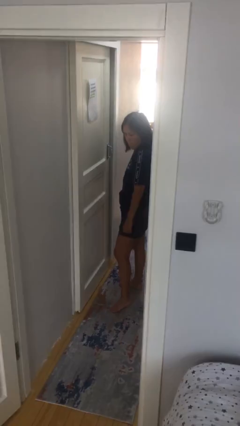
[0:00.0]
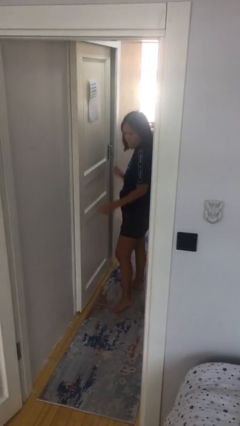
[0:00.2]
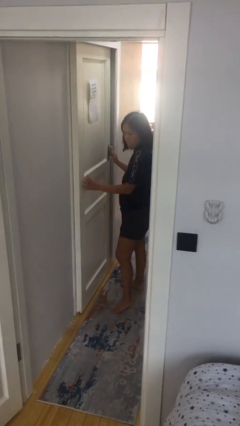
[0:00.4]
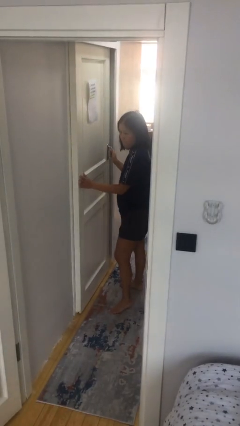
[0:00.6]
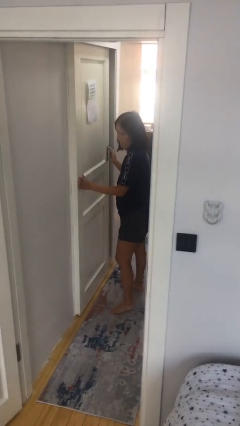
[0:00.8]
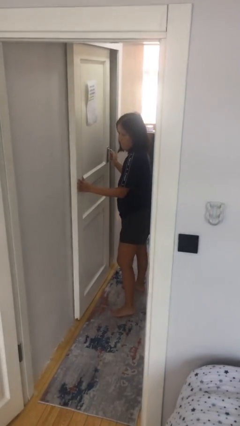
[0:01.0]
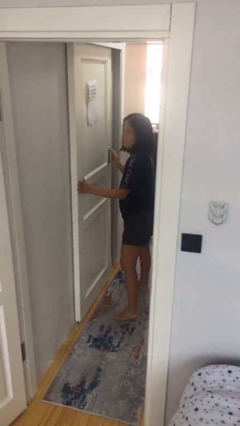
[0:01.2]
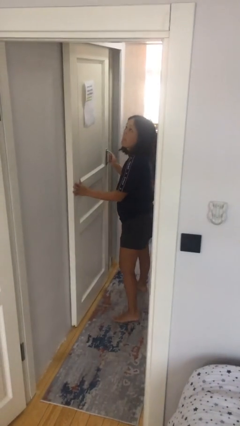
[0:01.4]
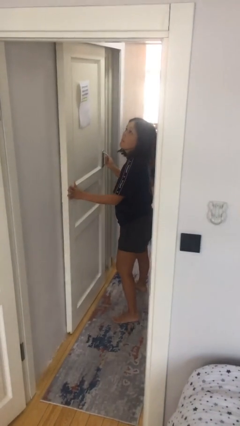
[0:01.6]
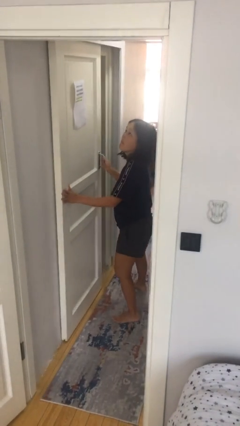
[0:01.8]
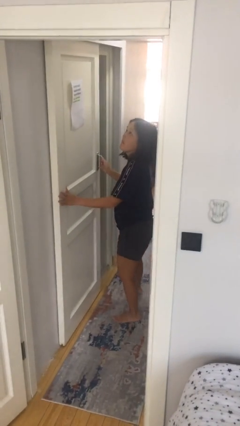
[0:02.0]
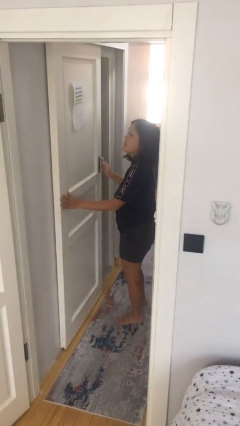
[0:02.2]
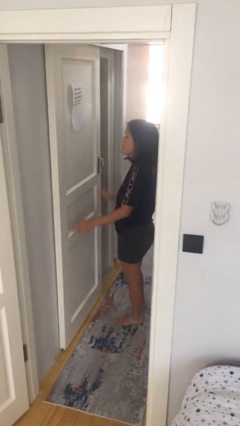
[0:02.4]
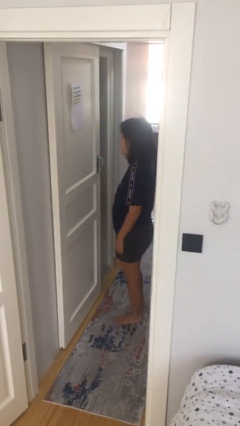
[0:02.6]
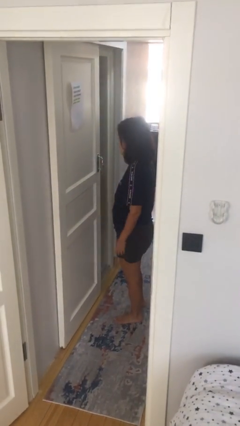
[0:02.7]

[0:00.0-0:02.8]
person opens sliding door

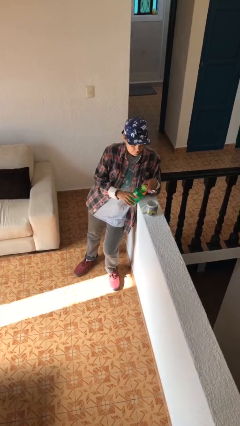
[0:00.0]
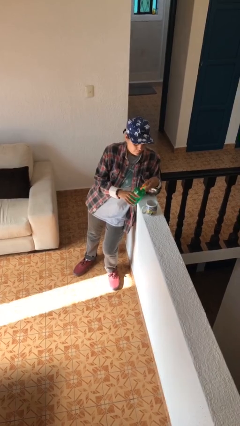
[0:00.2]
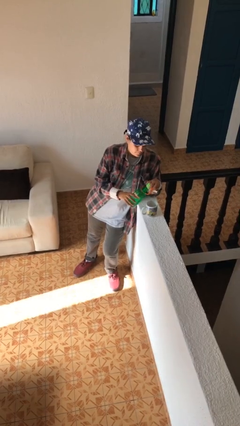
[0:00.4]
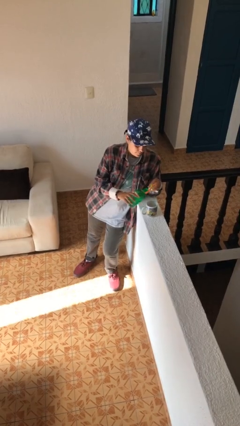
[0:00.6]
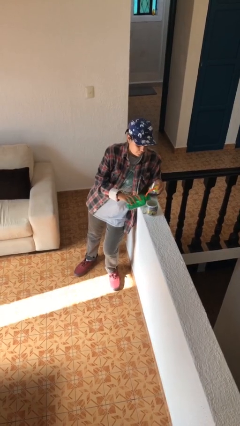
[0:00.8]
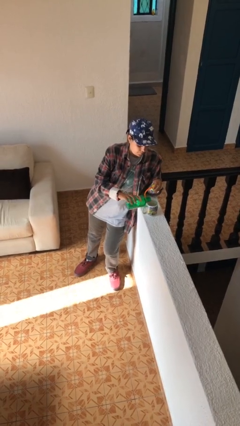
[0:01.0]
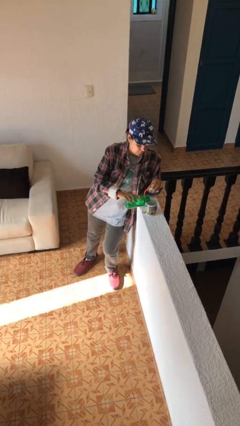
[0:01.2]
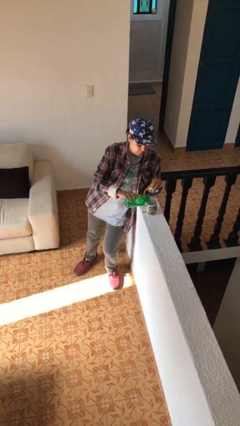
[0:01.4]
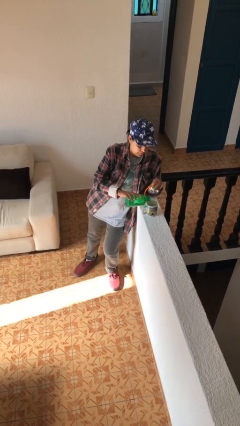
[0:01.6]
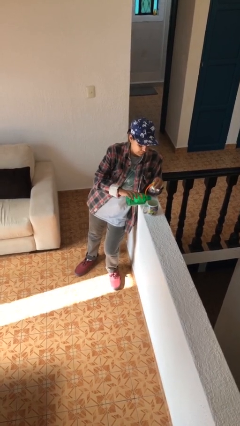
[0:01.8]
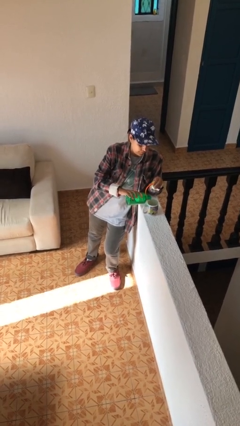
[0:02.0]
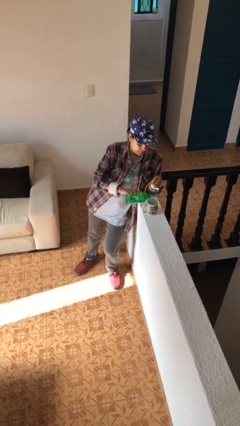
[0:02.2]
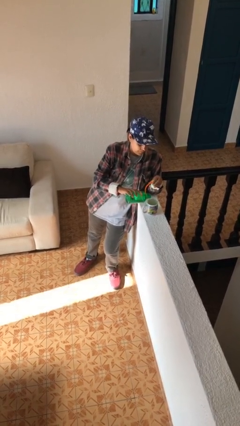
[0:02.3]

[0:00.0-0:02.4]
person pours liquid into cup

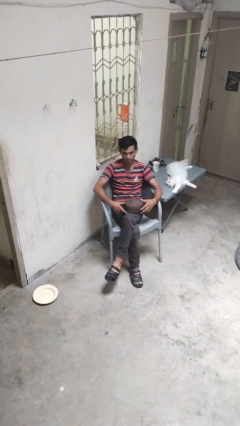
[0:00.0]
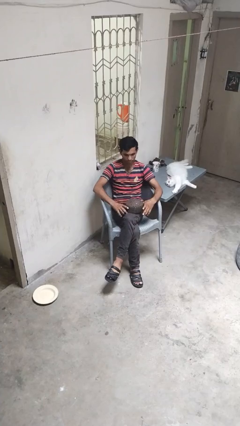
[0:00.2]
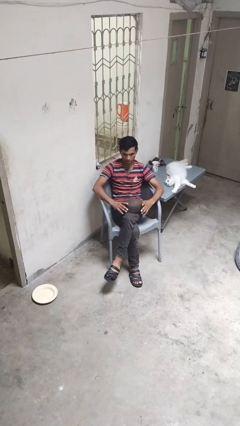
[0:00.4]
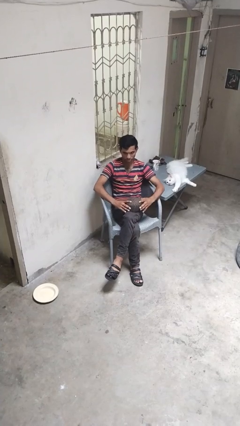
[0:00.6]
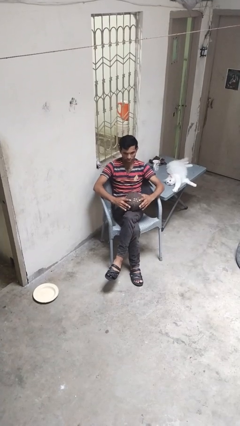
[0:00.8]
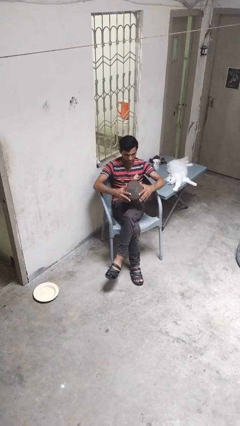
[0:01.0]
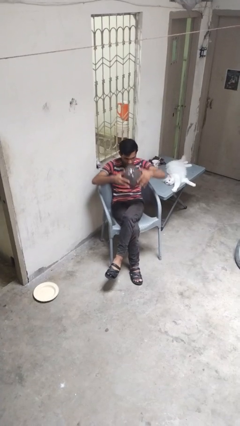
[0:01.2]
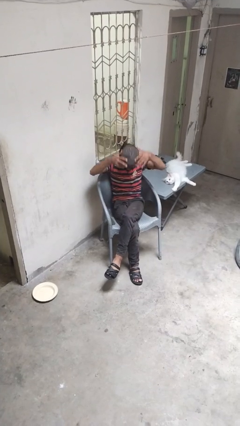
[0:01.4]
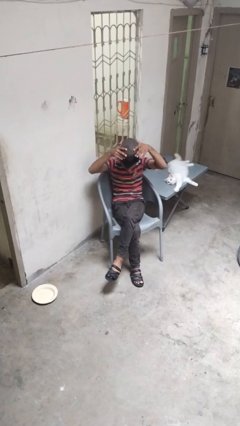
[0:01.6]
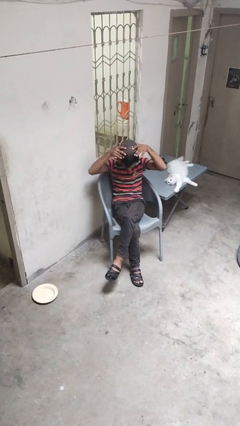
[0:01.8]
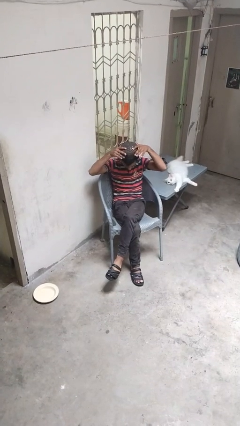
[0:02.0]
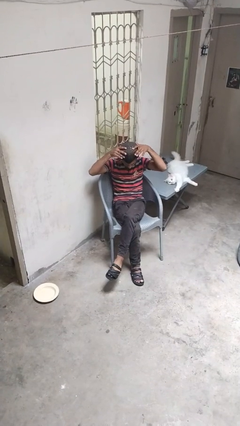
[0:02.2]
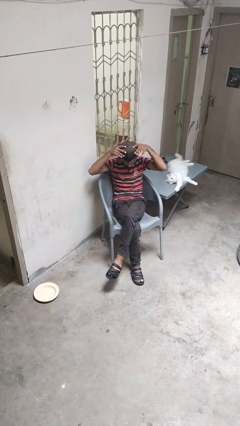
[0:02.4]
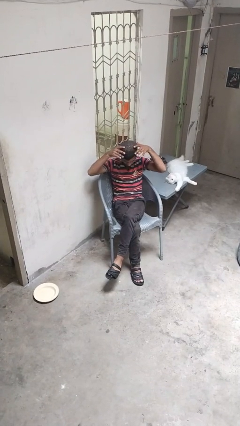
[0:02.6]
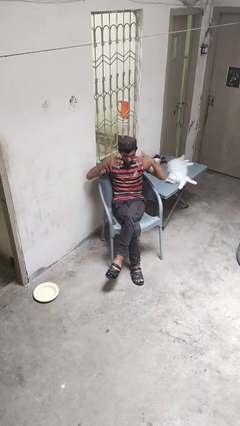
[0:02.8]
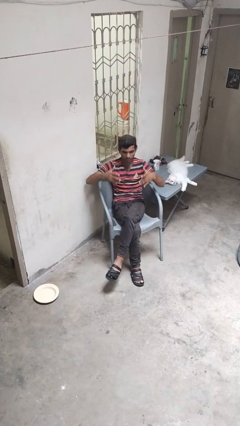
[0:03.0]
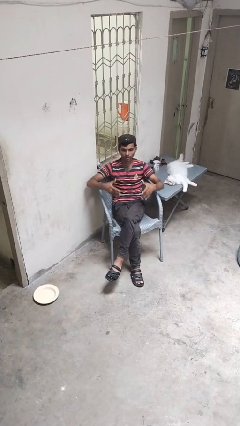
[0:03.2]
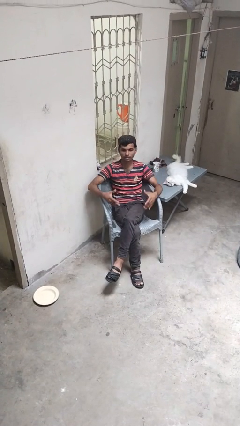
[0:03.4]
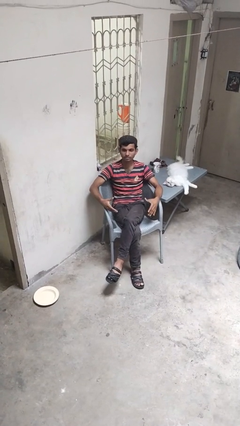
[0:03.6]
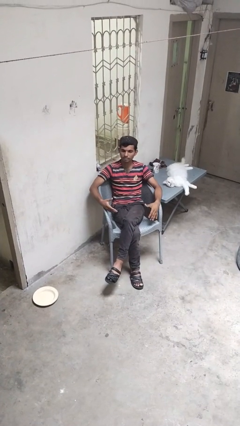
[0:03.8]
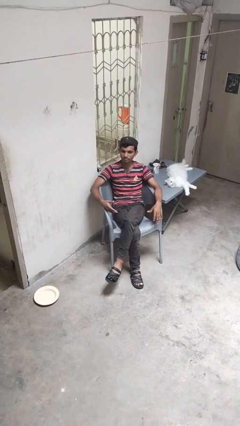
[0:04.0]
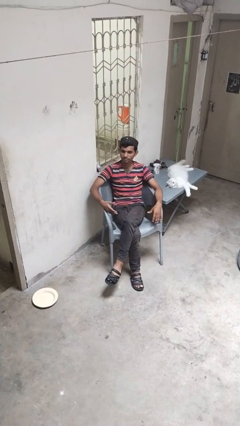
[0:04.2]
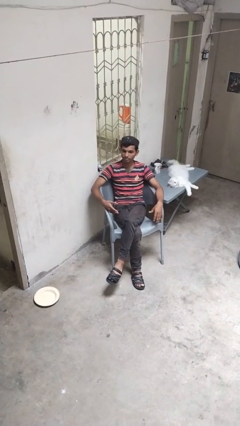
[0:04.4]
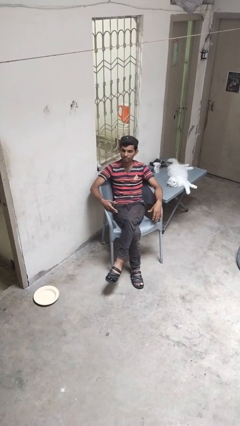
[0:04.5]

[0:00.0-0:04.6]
person puts on hat

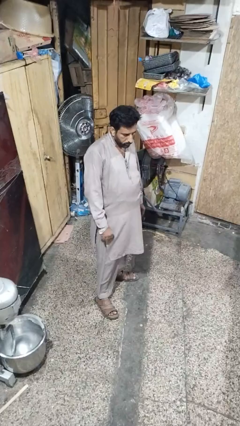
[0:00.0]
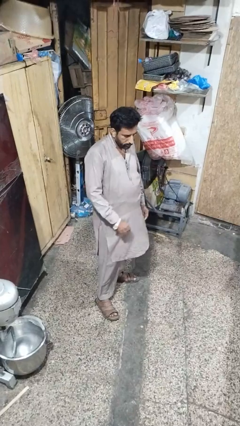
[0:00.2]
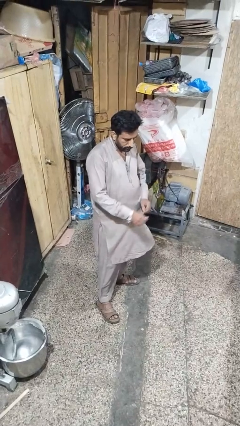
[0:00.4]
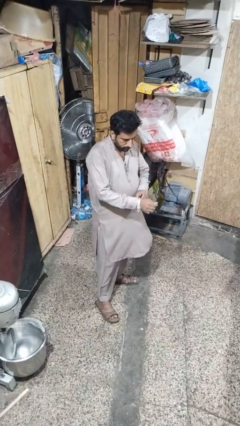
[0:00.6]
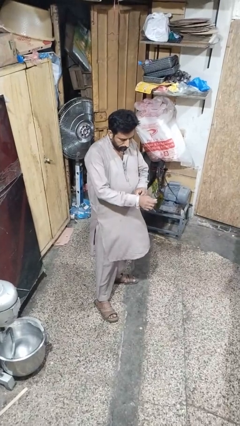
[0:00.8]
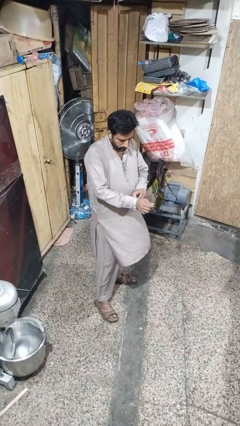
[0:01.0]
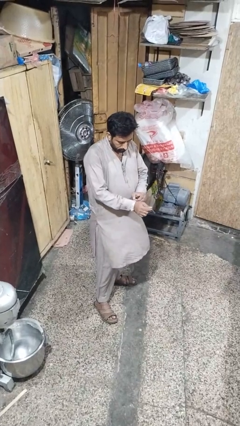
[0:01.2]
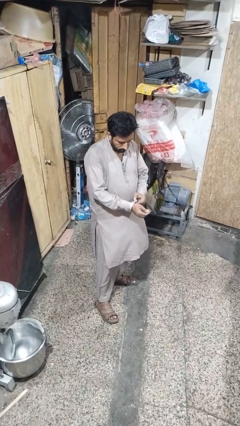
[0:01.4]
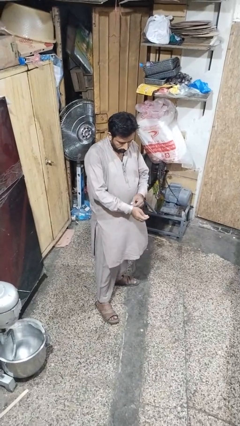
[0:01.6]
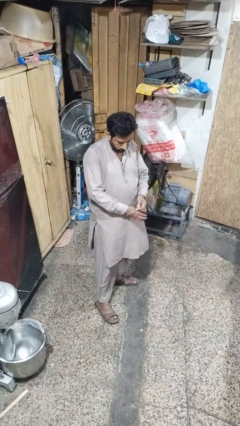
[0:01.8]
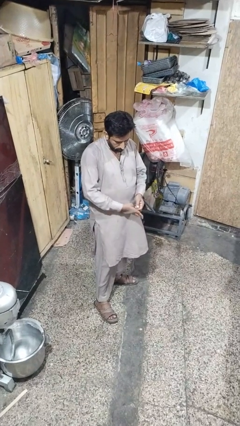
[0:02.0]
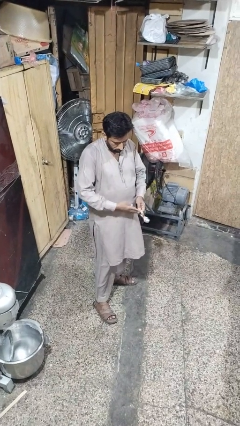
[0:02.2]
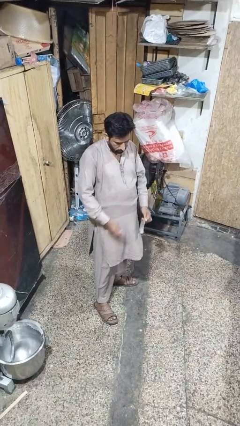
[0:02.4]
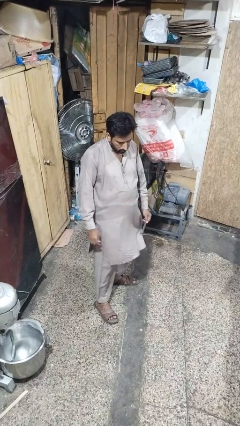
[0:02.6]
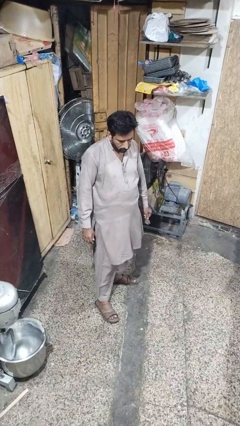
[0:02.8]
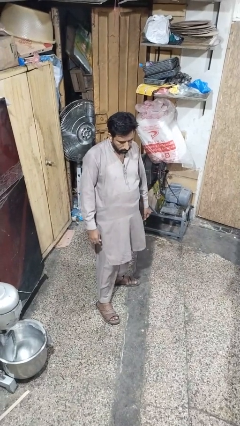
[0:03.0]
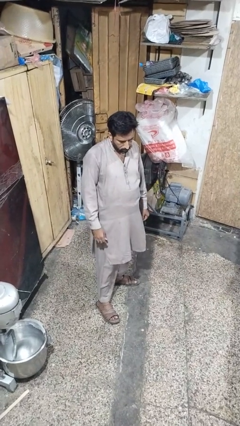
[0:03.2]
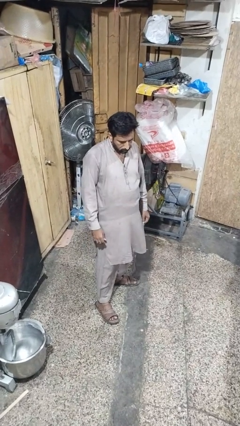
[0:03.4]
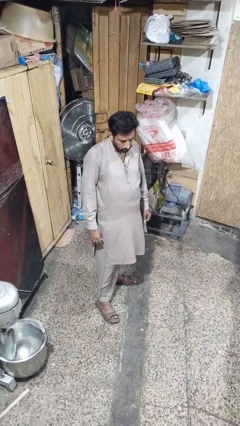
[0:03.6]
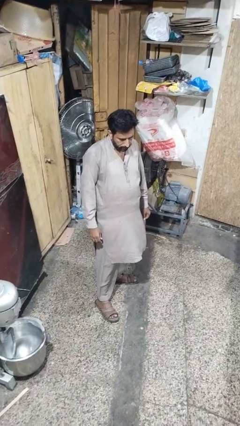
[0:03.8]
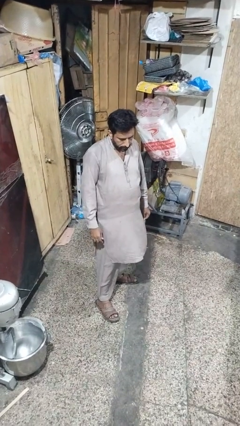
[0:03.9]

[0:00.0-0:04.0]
person takes off wristwatch

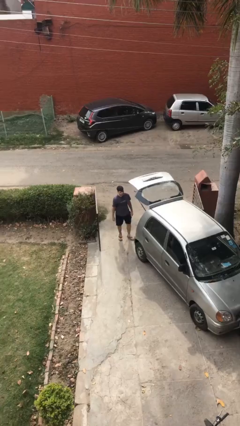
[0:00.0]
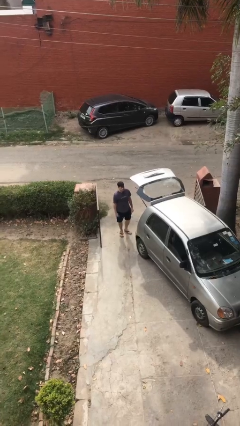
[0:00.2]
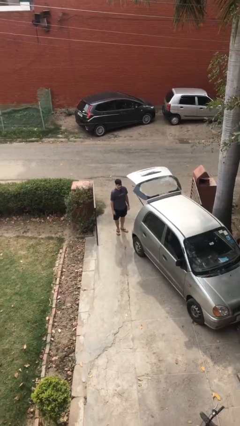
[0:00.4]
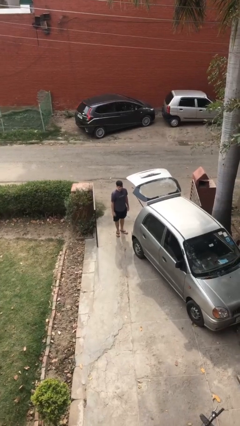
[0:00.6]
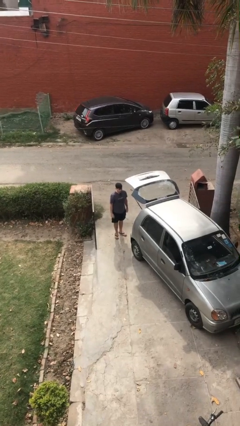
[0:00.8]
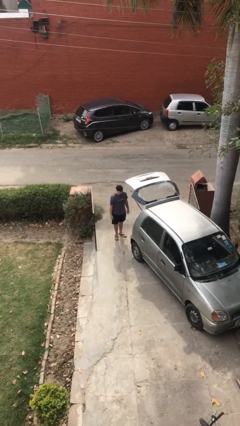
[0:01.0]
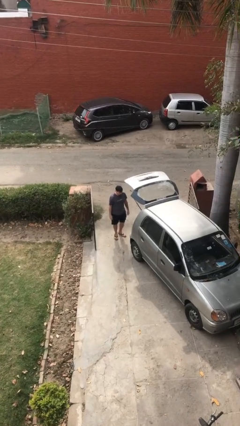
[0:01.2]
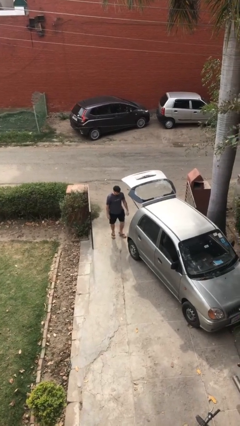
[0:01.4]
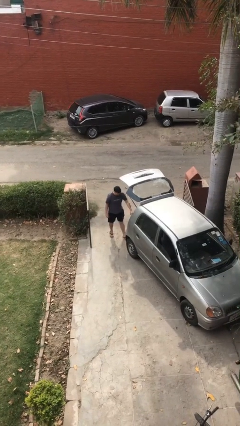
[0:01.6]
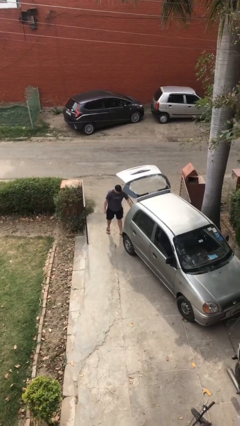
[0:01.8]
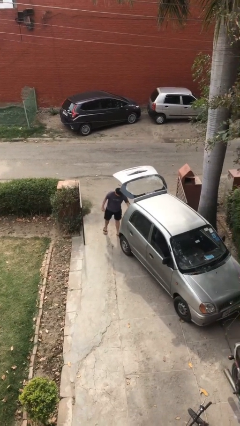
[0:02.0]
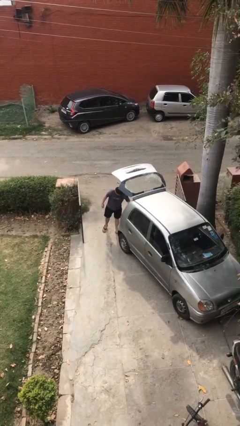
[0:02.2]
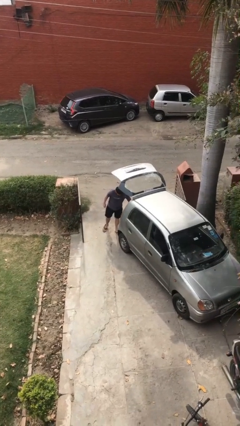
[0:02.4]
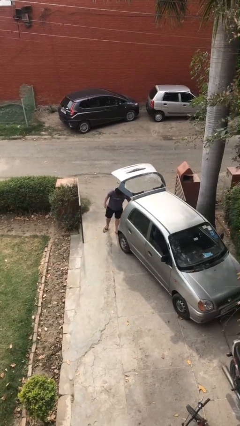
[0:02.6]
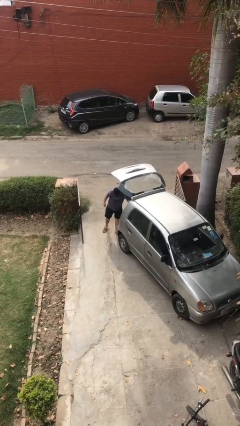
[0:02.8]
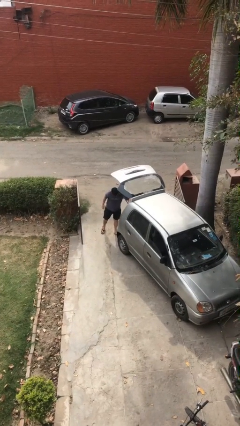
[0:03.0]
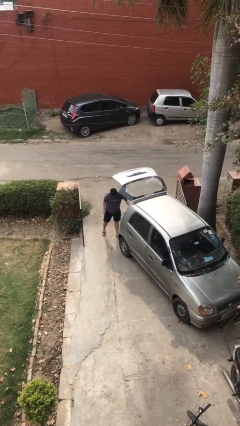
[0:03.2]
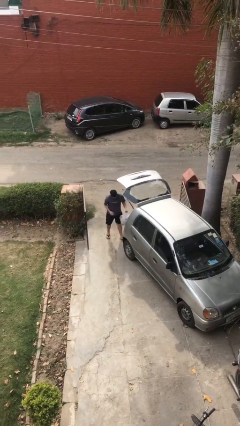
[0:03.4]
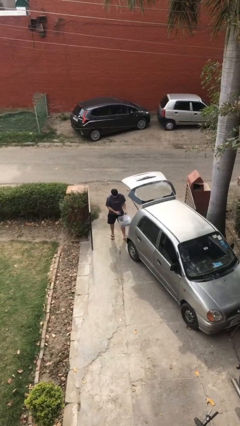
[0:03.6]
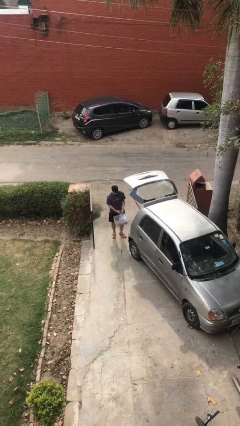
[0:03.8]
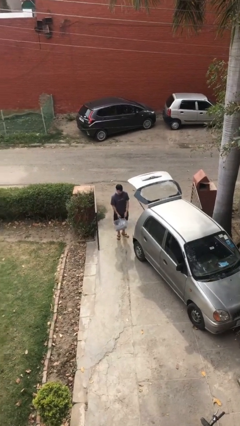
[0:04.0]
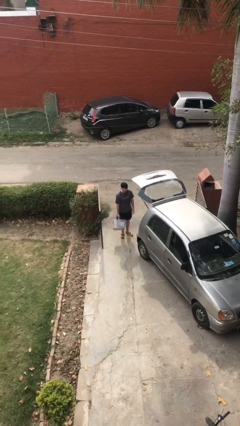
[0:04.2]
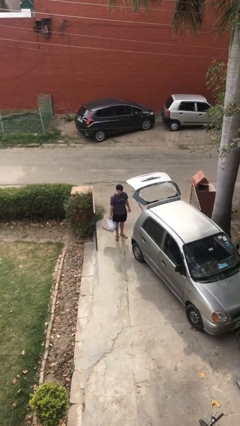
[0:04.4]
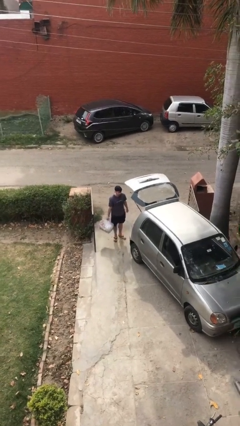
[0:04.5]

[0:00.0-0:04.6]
person unloads car
